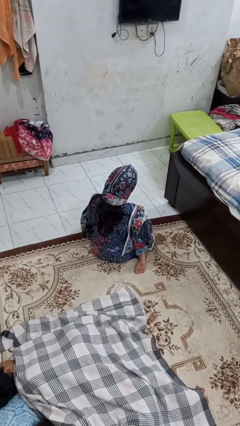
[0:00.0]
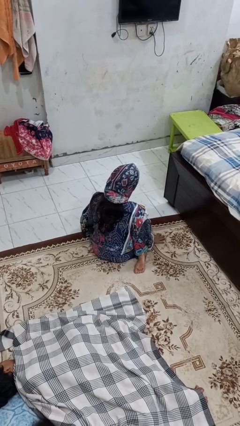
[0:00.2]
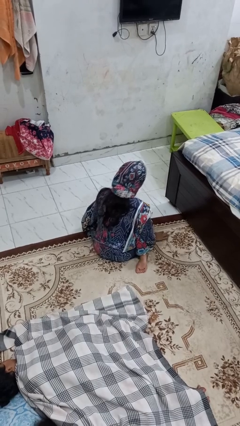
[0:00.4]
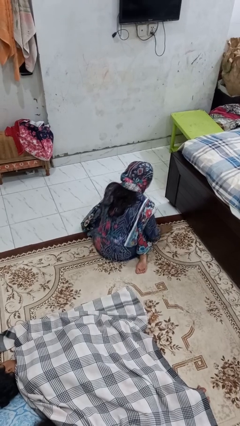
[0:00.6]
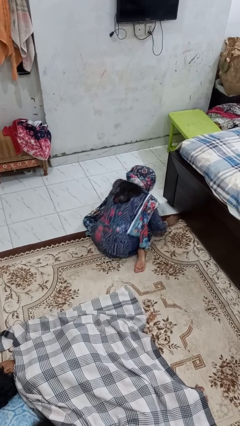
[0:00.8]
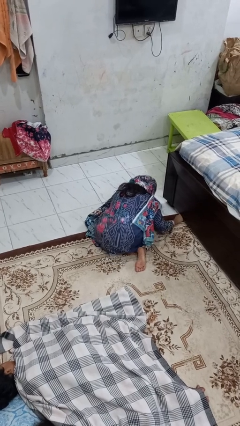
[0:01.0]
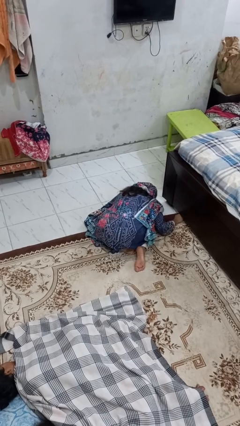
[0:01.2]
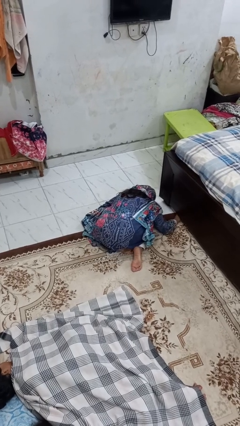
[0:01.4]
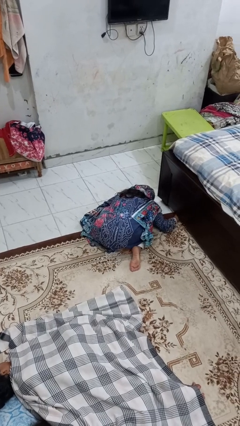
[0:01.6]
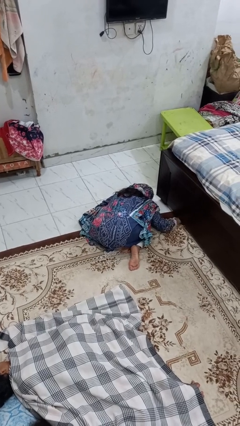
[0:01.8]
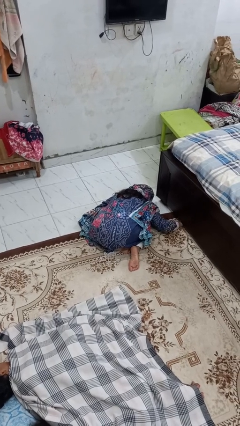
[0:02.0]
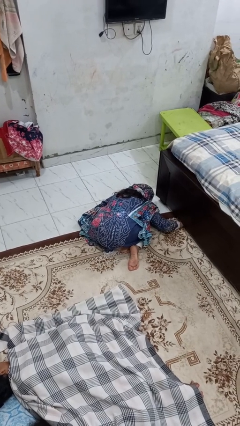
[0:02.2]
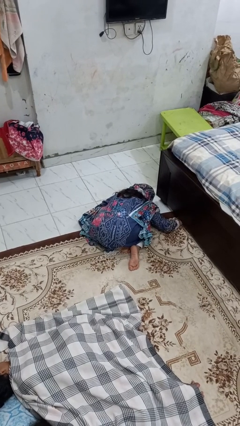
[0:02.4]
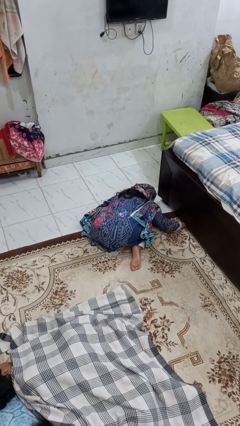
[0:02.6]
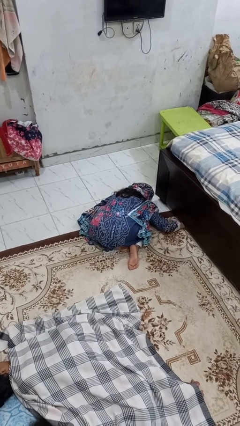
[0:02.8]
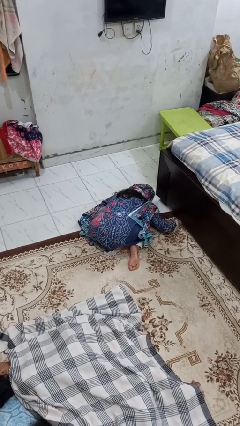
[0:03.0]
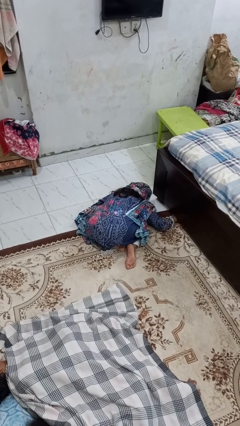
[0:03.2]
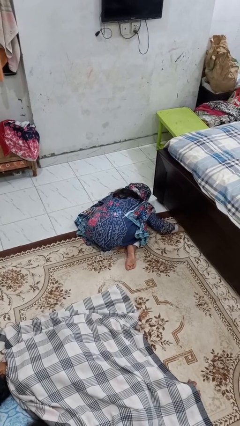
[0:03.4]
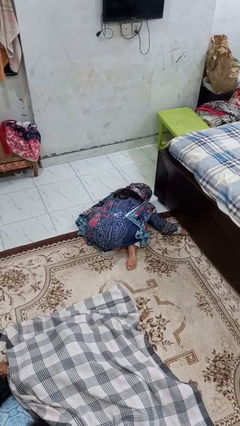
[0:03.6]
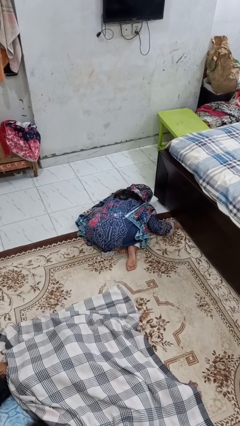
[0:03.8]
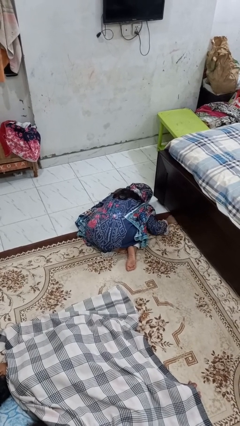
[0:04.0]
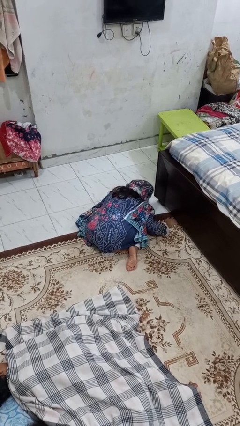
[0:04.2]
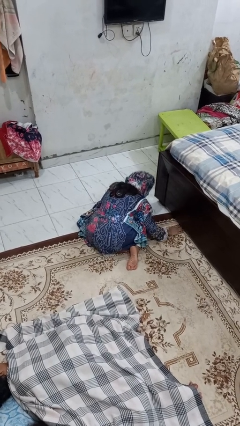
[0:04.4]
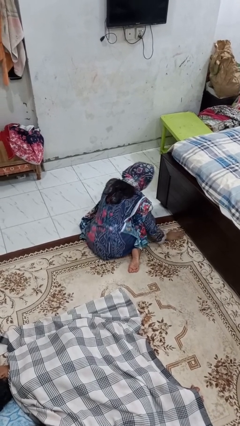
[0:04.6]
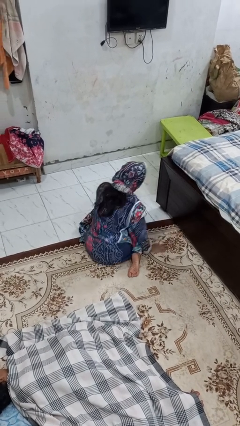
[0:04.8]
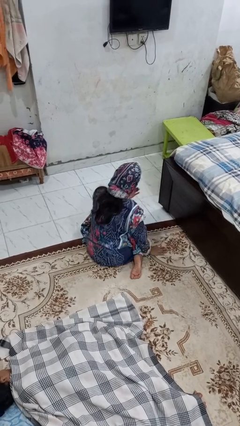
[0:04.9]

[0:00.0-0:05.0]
person searches under bed

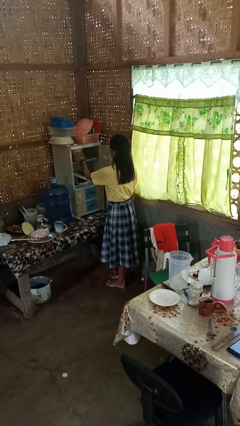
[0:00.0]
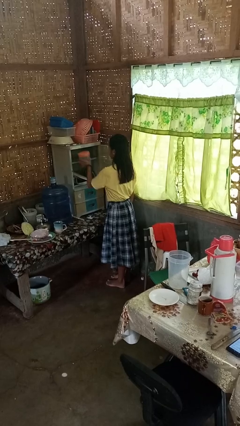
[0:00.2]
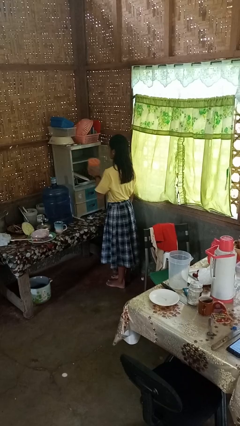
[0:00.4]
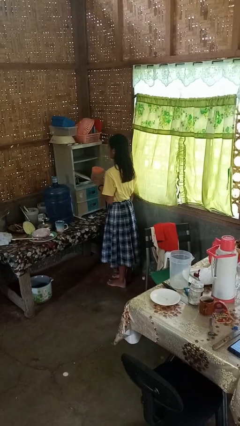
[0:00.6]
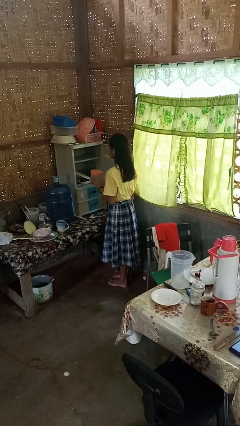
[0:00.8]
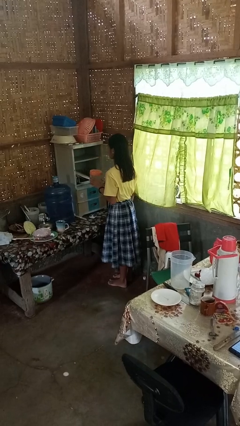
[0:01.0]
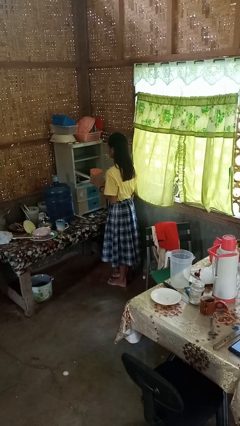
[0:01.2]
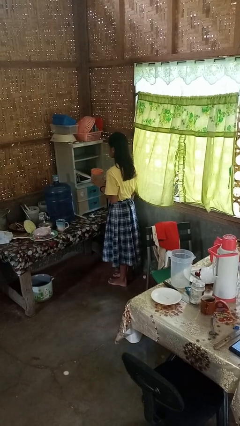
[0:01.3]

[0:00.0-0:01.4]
person picks up object from cabinet

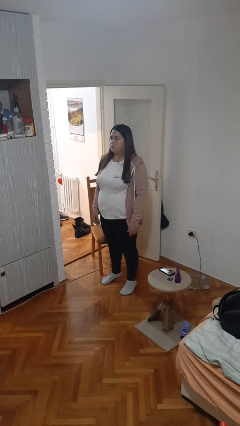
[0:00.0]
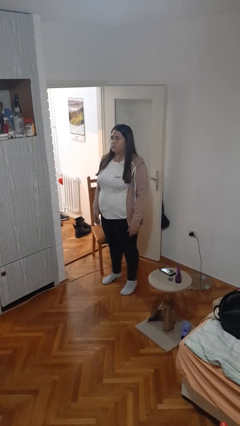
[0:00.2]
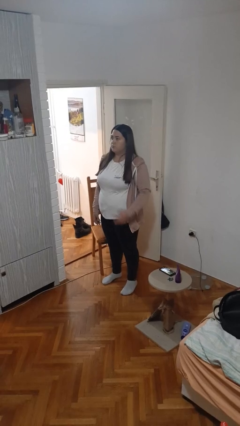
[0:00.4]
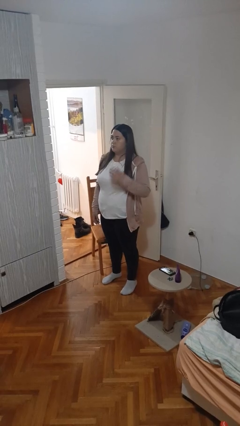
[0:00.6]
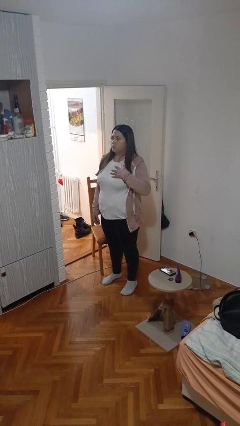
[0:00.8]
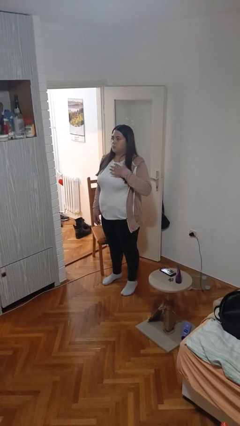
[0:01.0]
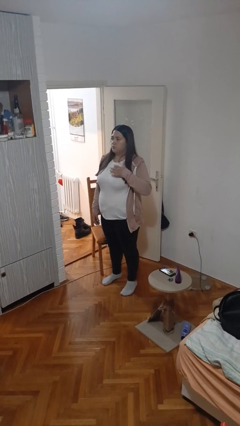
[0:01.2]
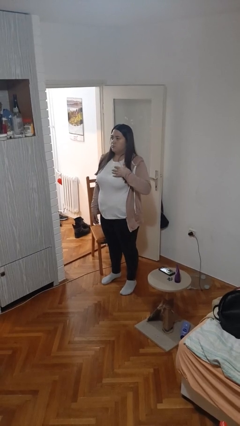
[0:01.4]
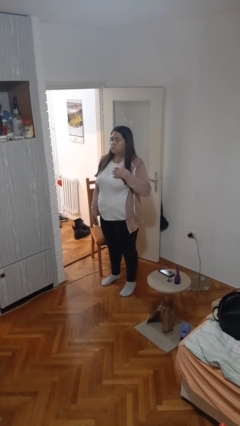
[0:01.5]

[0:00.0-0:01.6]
person drums on chest

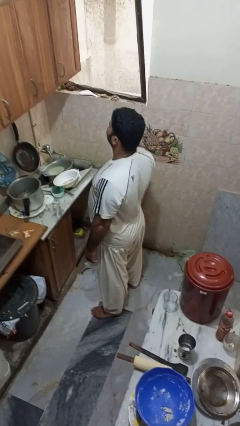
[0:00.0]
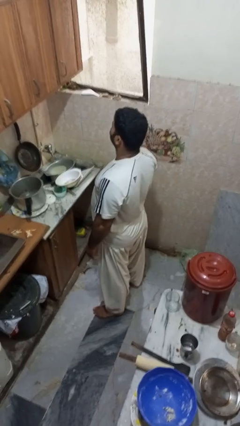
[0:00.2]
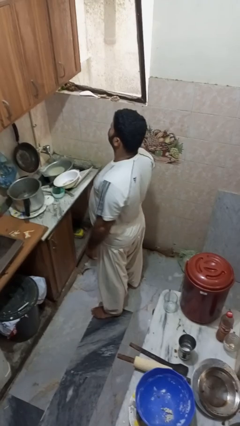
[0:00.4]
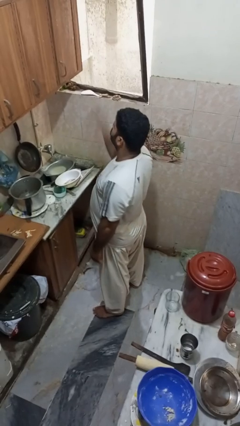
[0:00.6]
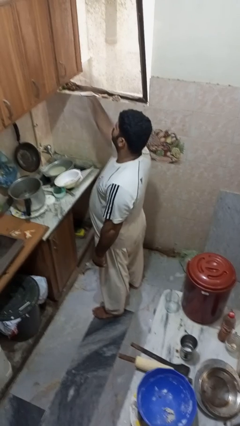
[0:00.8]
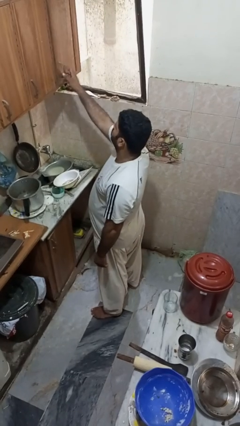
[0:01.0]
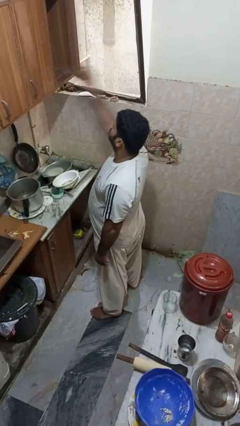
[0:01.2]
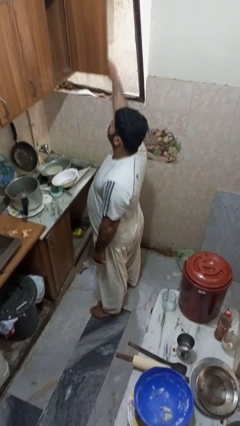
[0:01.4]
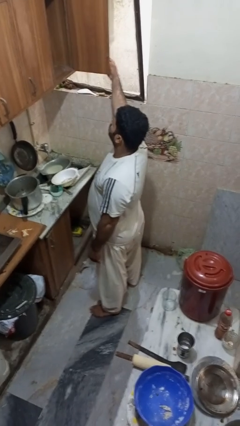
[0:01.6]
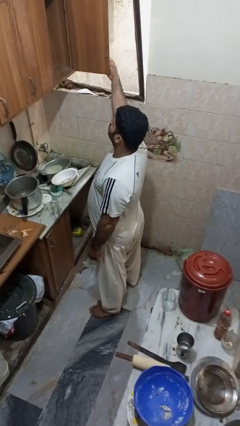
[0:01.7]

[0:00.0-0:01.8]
person opens cabinet

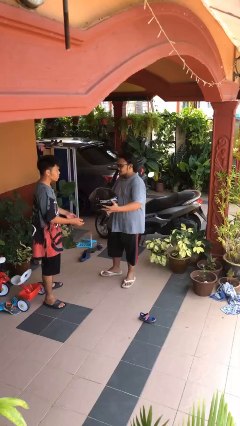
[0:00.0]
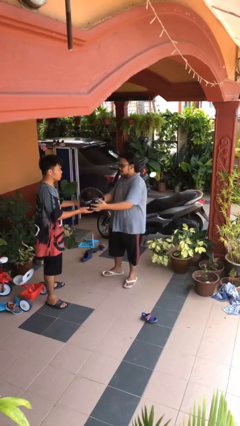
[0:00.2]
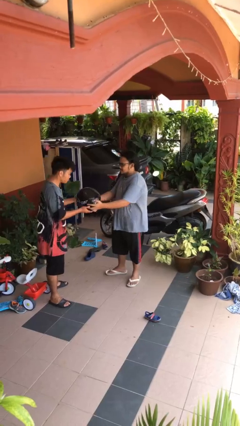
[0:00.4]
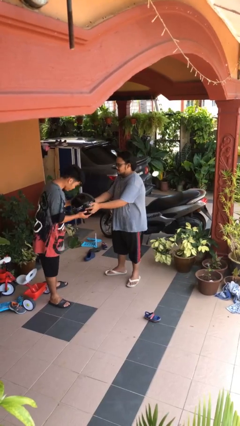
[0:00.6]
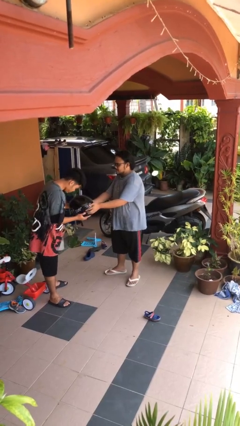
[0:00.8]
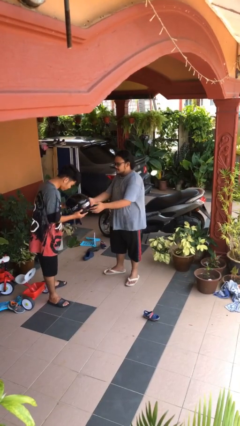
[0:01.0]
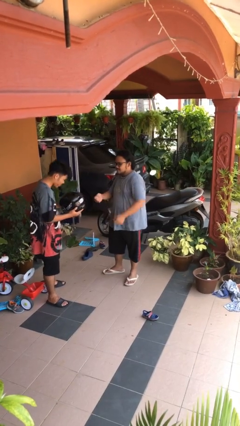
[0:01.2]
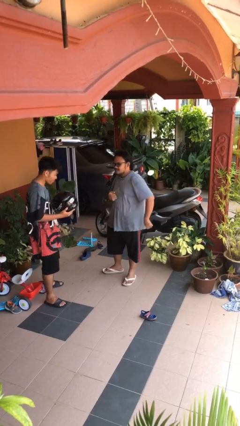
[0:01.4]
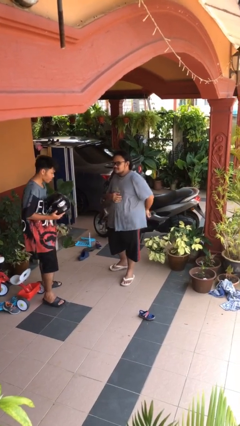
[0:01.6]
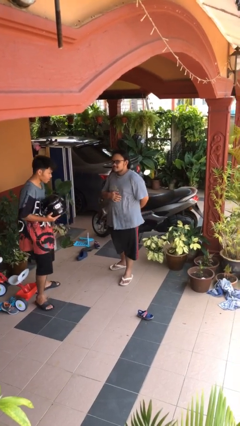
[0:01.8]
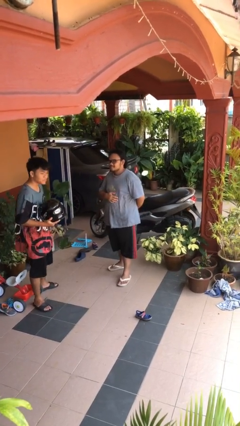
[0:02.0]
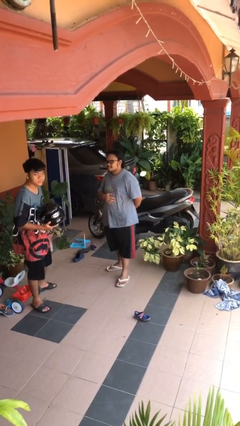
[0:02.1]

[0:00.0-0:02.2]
person transfers object to person

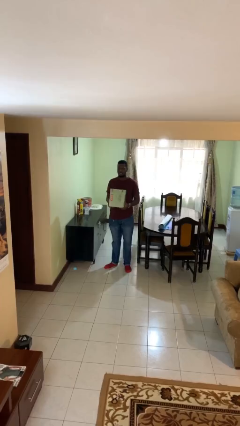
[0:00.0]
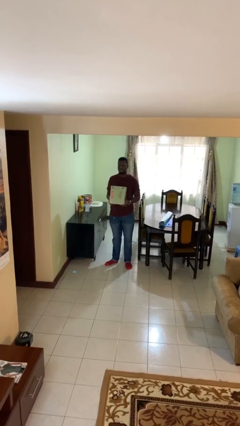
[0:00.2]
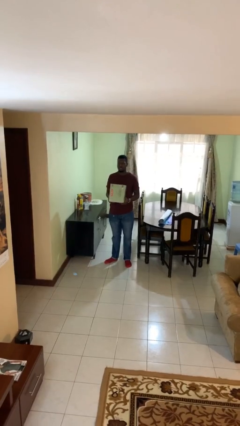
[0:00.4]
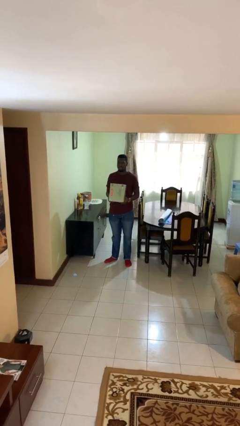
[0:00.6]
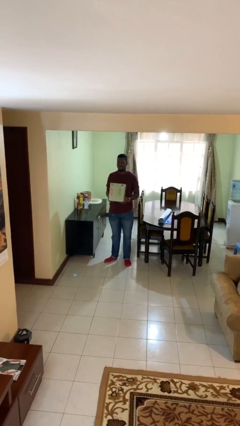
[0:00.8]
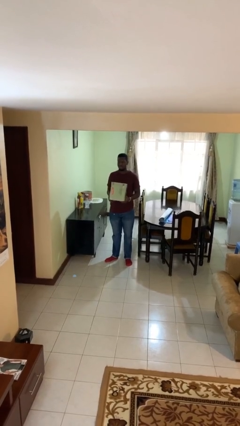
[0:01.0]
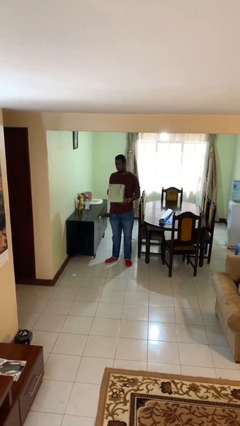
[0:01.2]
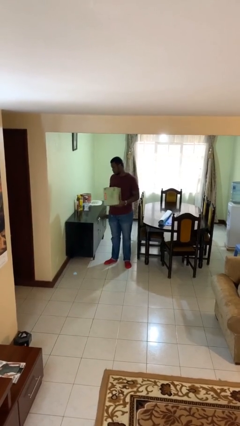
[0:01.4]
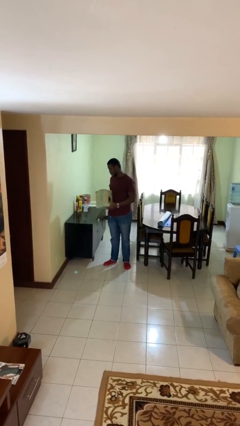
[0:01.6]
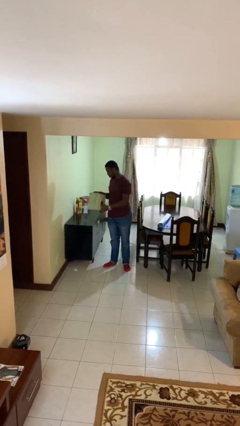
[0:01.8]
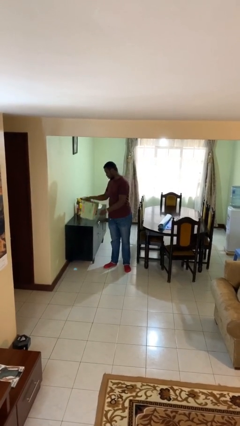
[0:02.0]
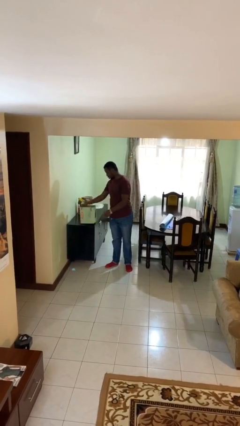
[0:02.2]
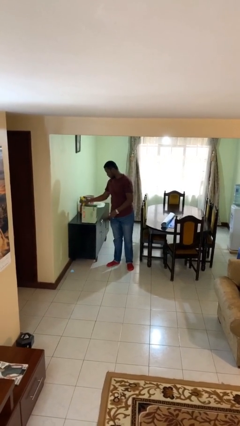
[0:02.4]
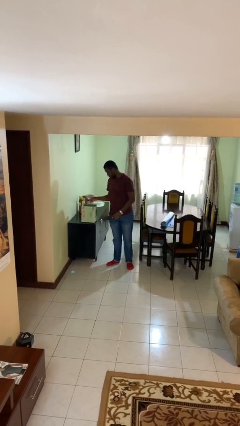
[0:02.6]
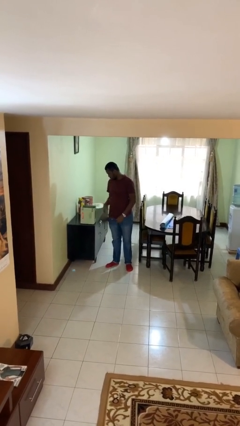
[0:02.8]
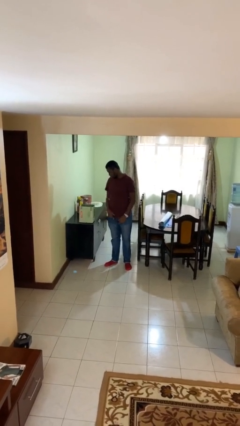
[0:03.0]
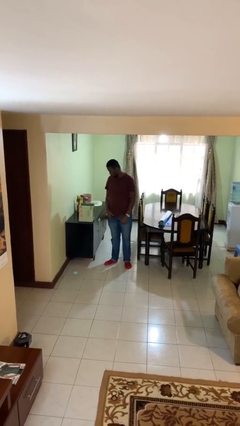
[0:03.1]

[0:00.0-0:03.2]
person puts down object on table

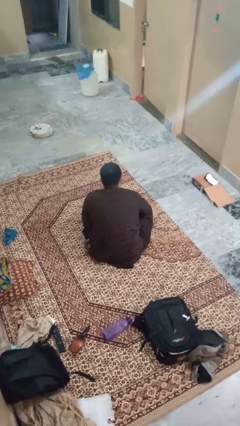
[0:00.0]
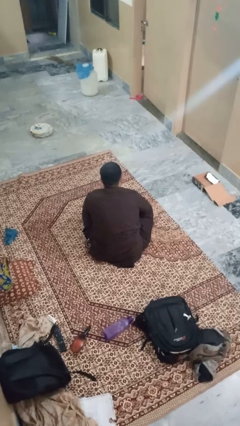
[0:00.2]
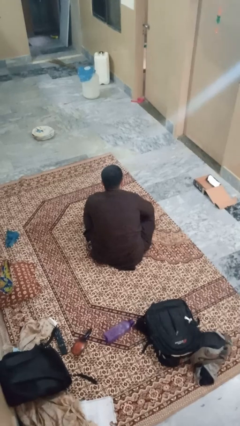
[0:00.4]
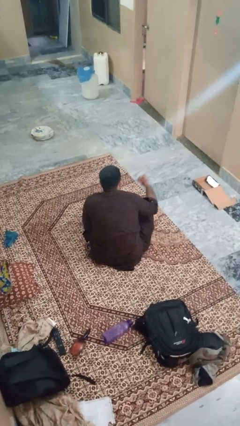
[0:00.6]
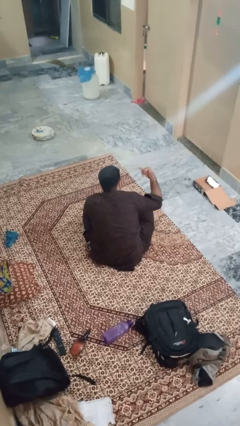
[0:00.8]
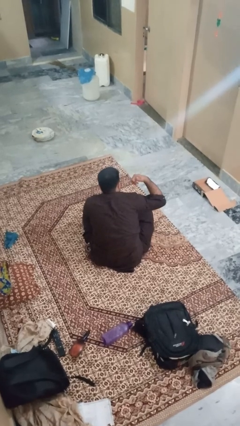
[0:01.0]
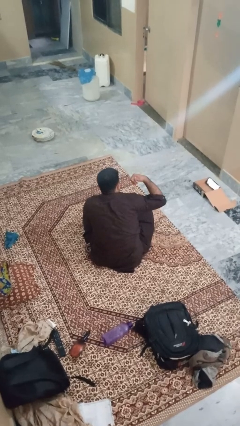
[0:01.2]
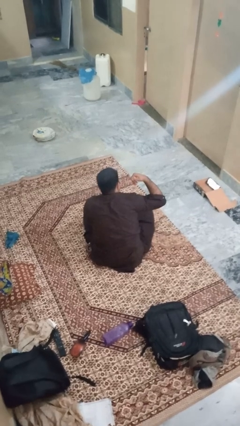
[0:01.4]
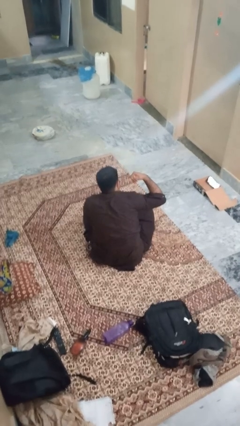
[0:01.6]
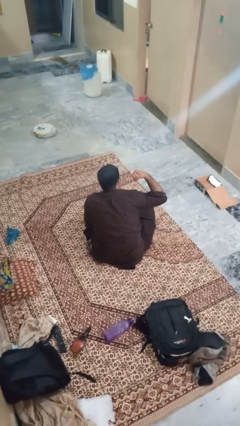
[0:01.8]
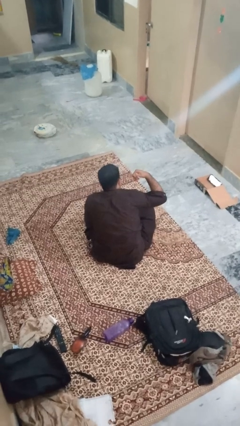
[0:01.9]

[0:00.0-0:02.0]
person gestures call me
